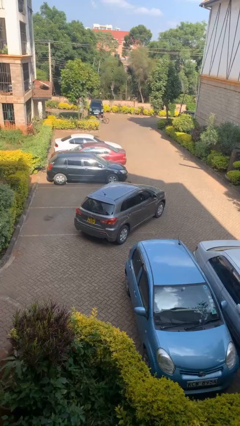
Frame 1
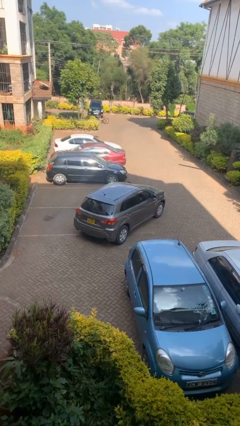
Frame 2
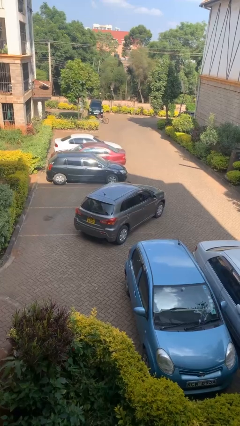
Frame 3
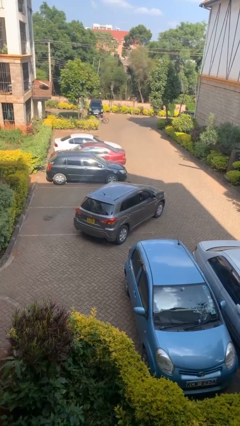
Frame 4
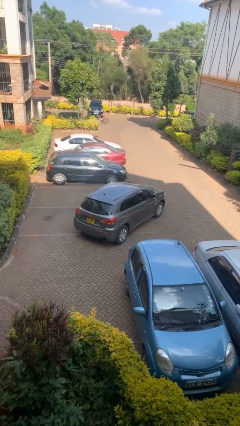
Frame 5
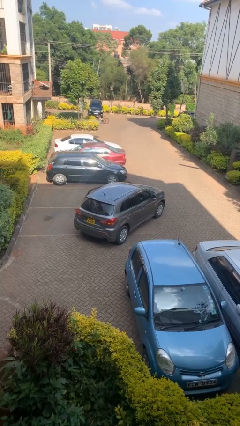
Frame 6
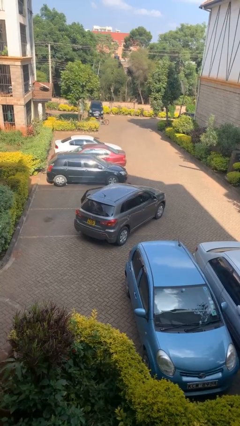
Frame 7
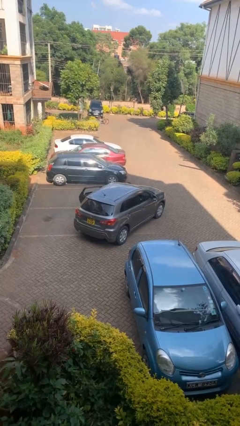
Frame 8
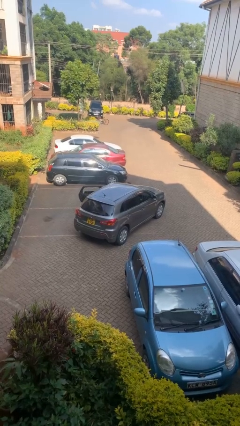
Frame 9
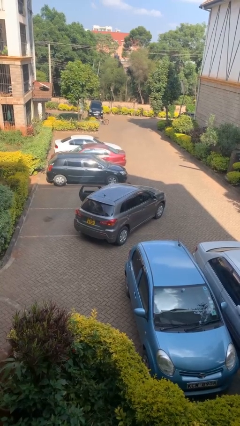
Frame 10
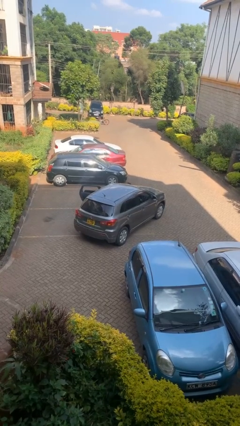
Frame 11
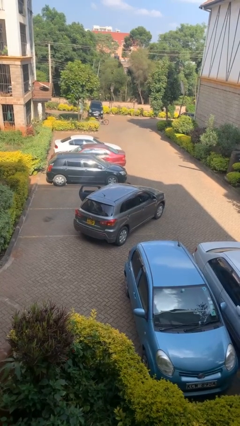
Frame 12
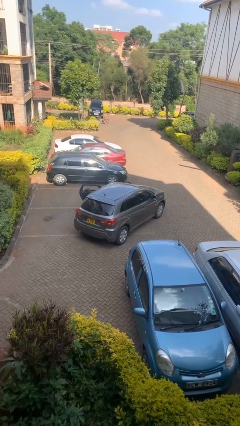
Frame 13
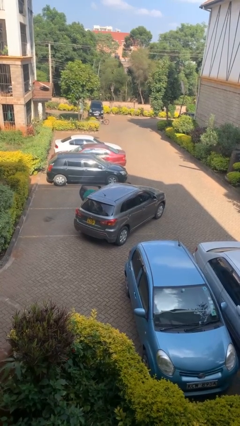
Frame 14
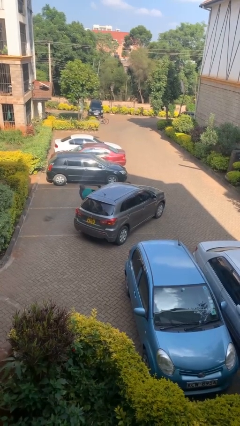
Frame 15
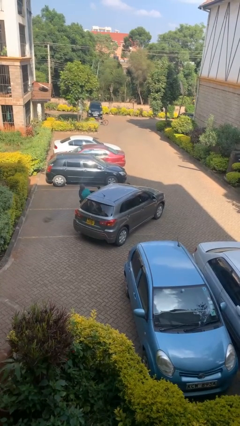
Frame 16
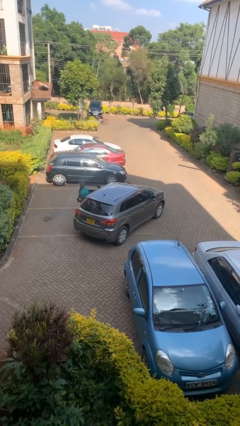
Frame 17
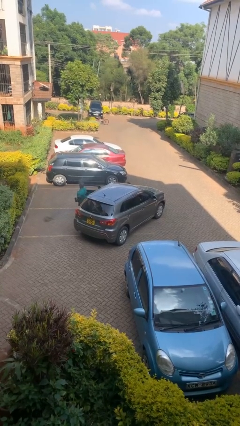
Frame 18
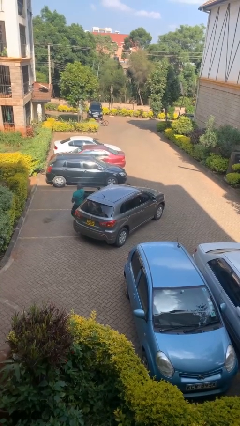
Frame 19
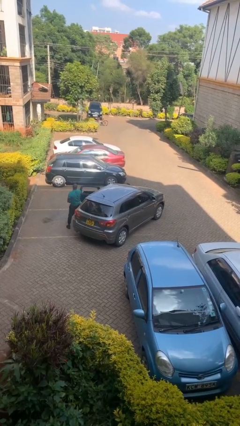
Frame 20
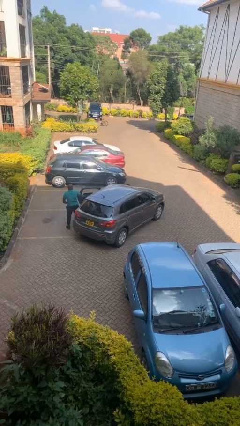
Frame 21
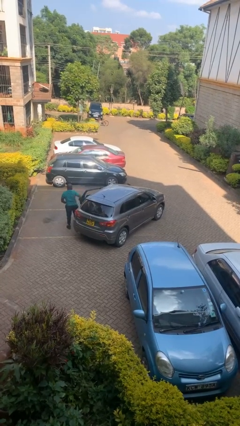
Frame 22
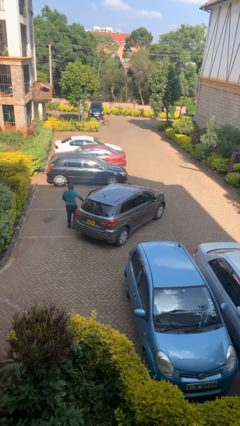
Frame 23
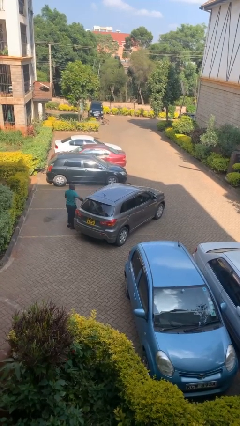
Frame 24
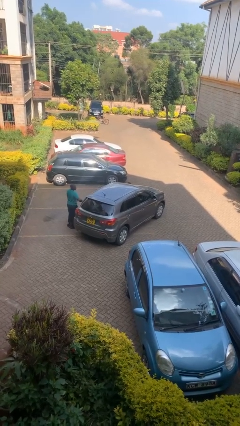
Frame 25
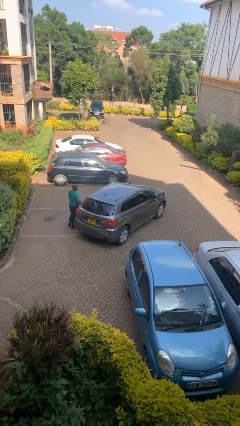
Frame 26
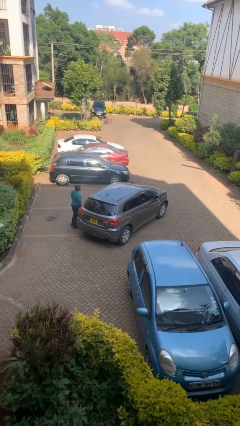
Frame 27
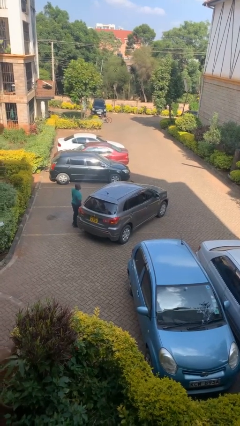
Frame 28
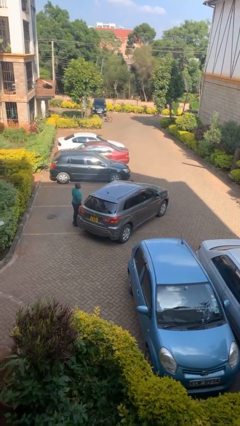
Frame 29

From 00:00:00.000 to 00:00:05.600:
car drops off person

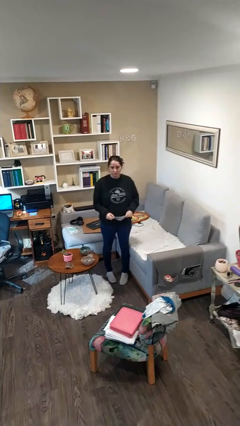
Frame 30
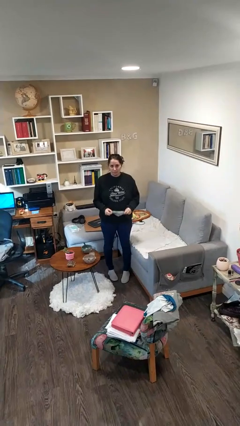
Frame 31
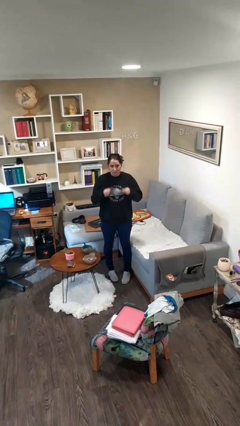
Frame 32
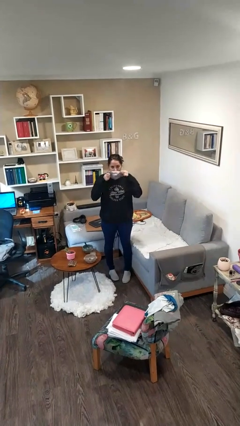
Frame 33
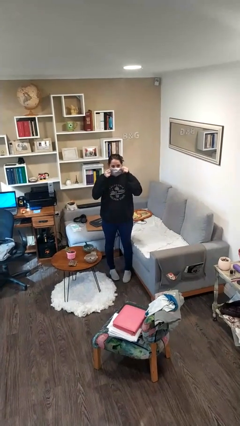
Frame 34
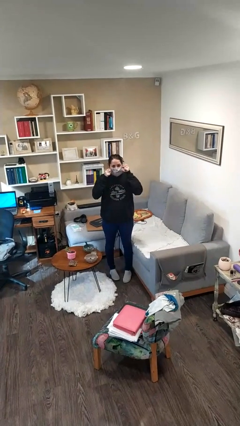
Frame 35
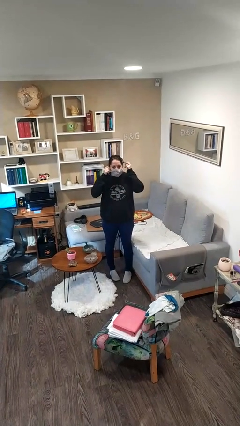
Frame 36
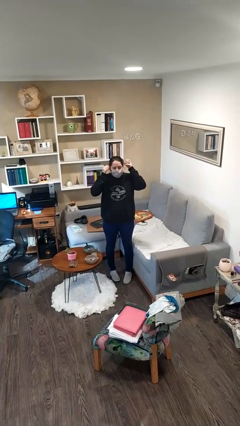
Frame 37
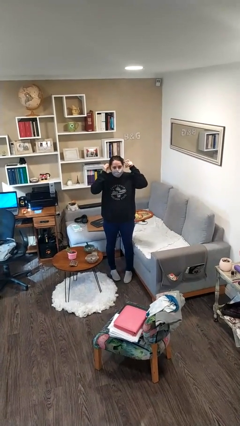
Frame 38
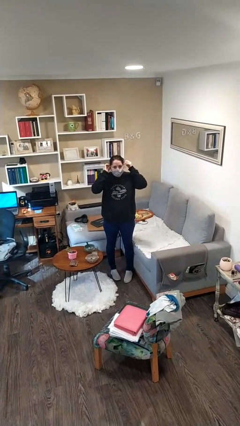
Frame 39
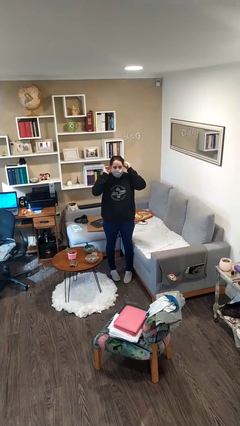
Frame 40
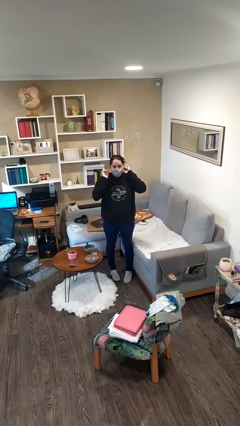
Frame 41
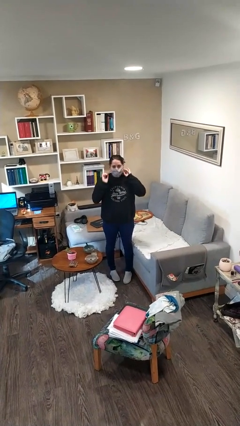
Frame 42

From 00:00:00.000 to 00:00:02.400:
person puts on facemask

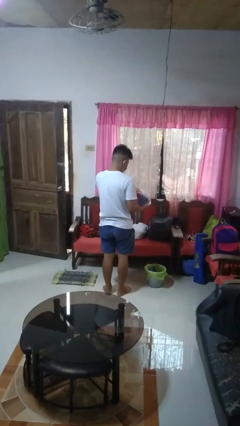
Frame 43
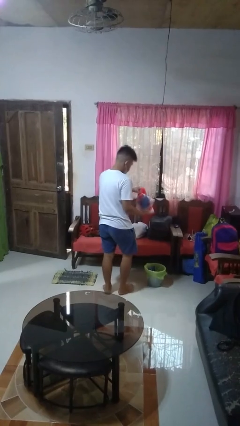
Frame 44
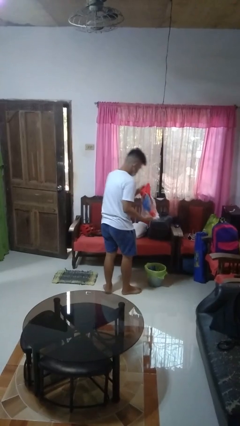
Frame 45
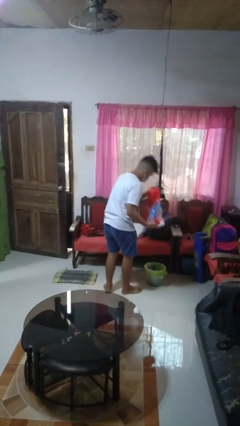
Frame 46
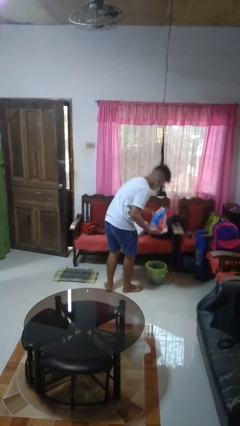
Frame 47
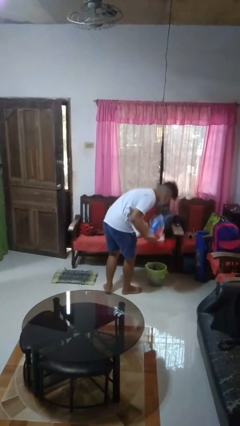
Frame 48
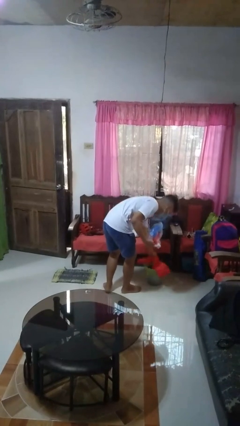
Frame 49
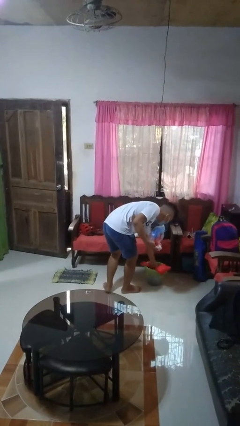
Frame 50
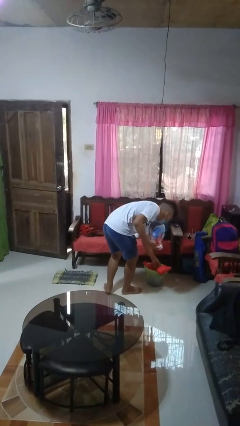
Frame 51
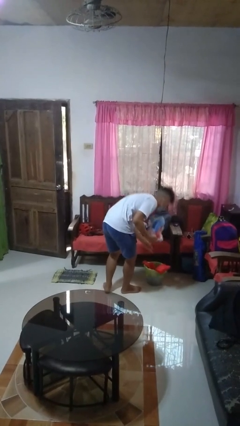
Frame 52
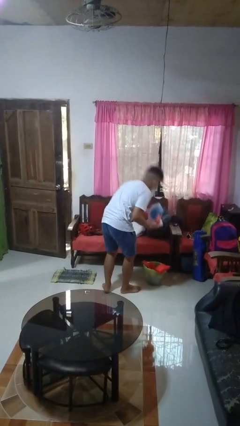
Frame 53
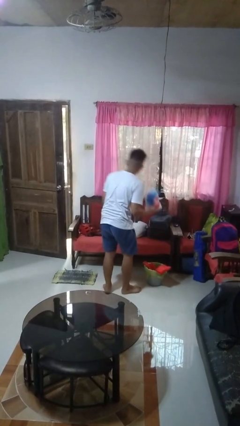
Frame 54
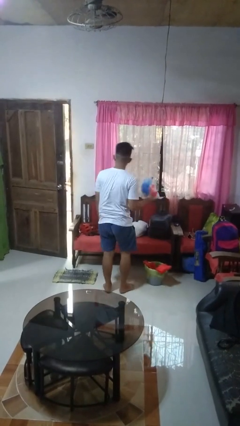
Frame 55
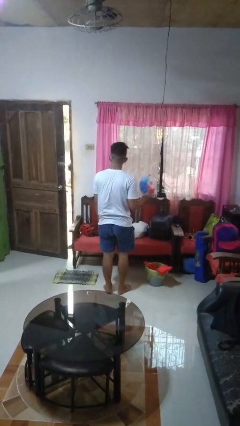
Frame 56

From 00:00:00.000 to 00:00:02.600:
person discards trash

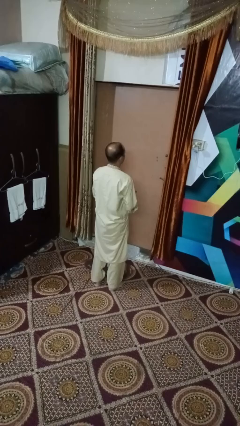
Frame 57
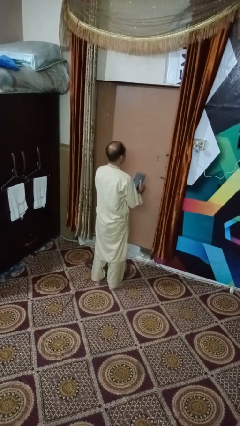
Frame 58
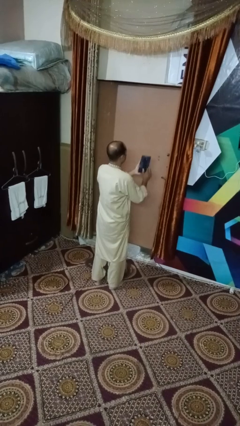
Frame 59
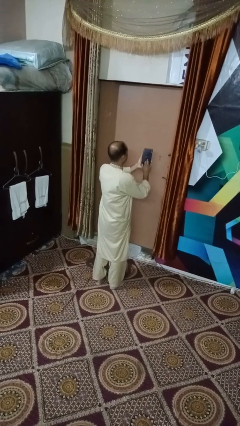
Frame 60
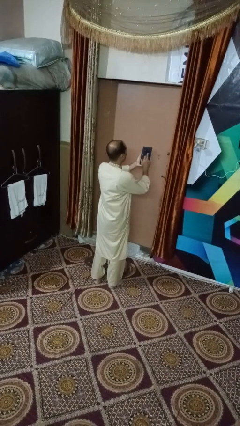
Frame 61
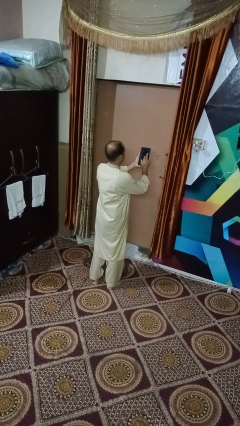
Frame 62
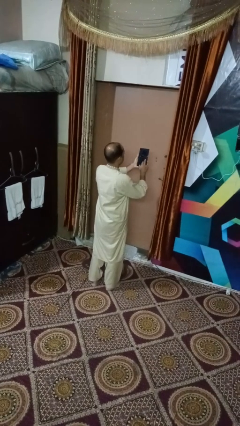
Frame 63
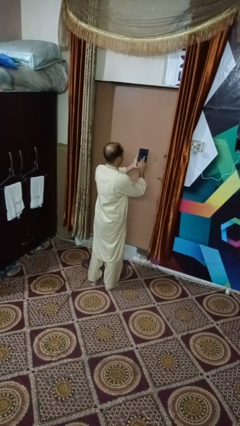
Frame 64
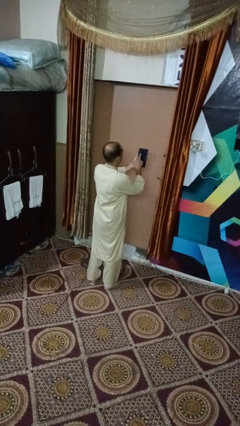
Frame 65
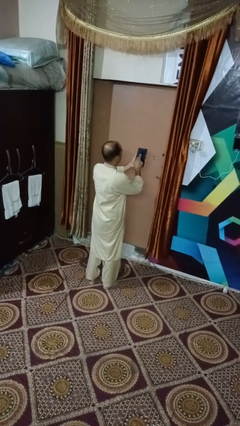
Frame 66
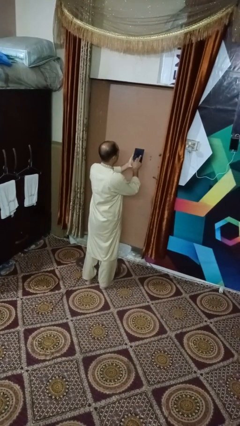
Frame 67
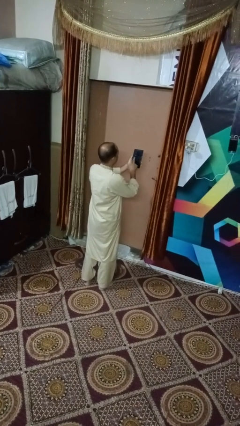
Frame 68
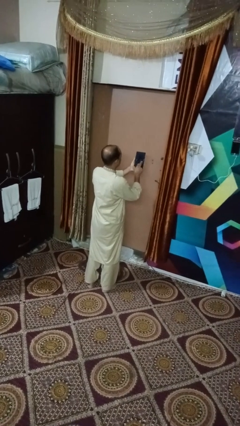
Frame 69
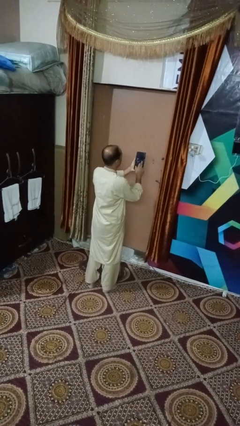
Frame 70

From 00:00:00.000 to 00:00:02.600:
person interacts with tablet

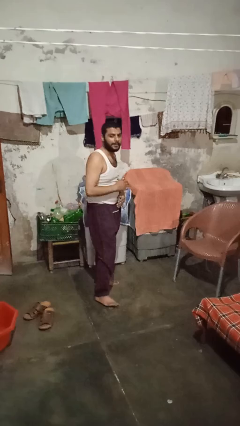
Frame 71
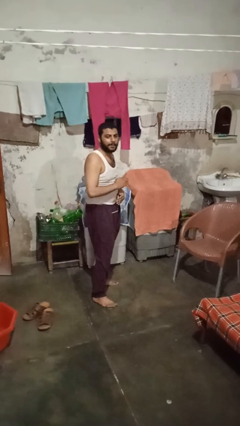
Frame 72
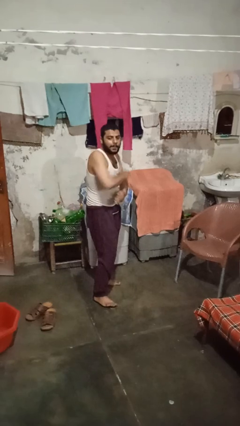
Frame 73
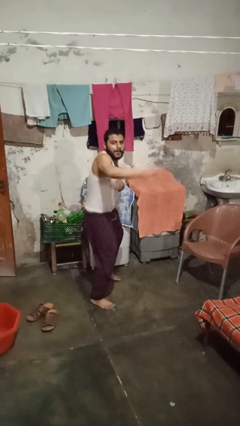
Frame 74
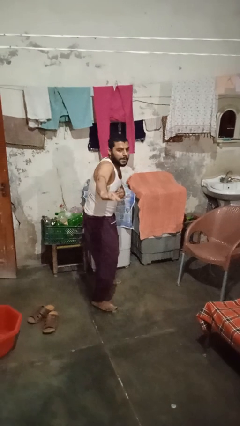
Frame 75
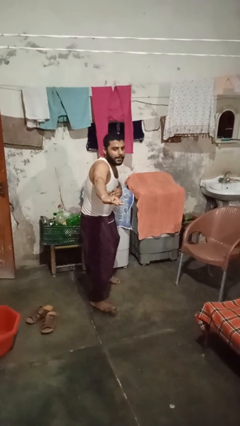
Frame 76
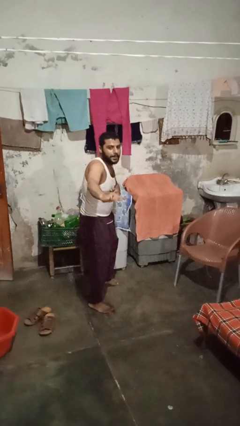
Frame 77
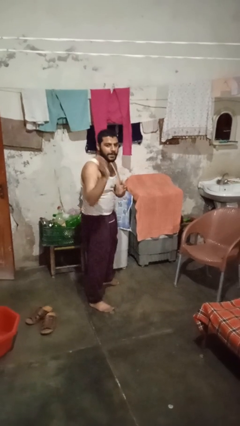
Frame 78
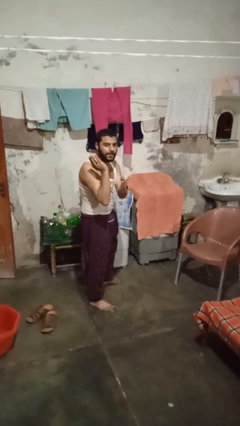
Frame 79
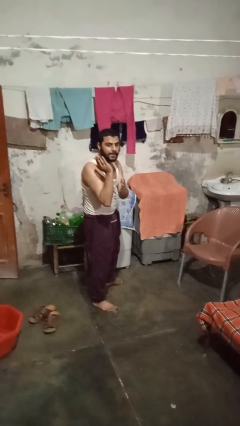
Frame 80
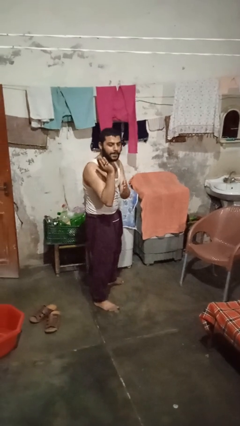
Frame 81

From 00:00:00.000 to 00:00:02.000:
person karate chop

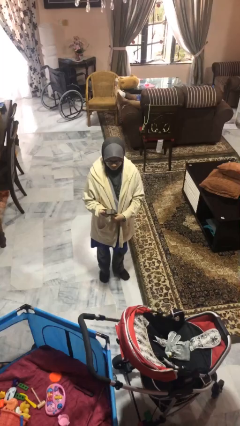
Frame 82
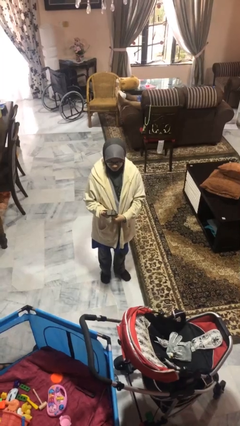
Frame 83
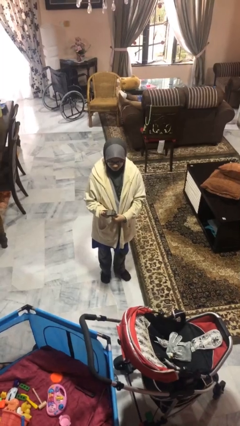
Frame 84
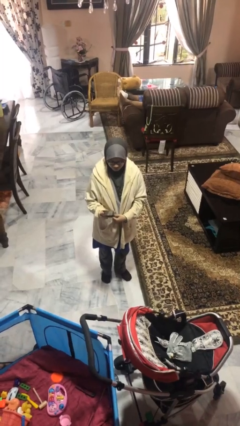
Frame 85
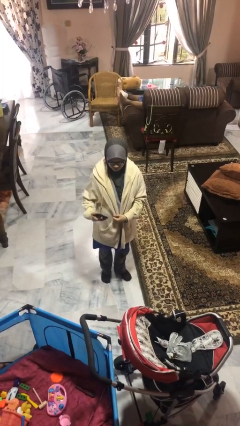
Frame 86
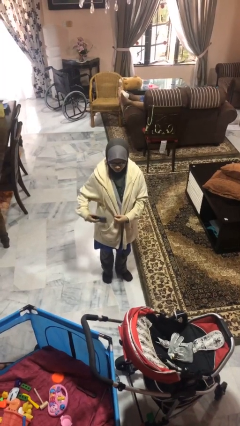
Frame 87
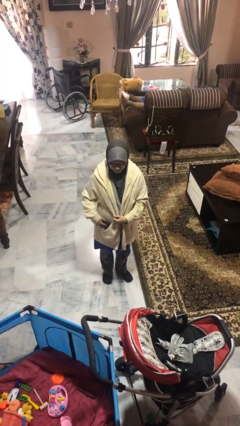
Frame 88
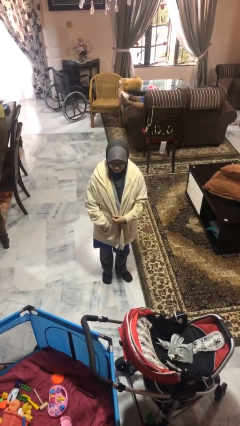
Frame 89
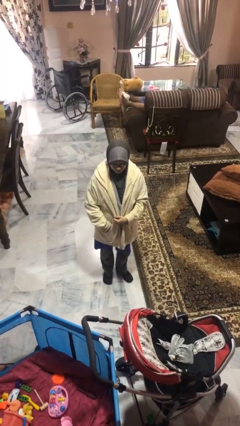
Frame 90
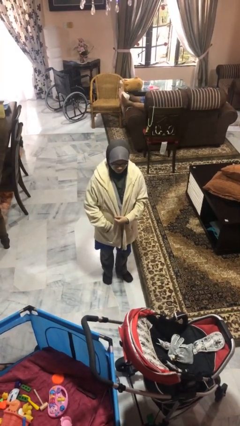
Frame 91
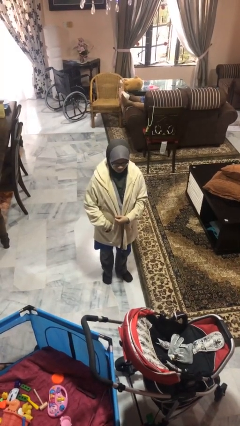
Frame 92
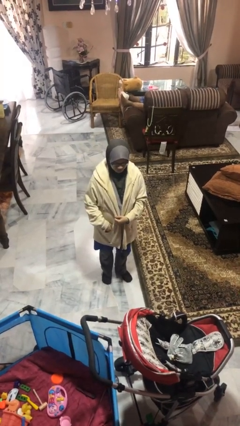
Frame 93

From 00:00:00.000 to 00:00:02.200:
person puts phone into pocket
